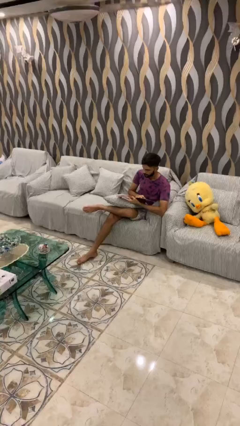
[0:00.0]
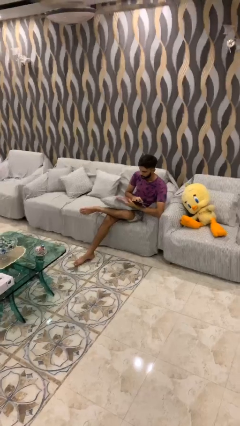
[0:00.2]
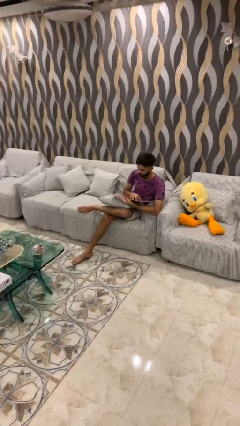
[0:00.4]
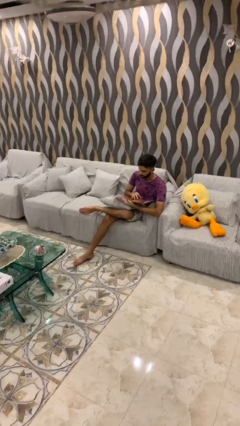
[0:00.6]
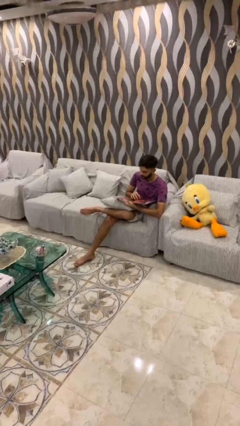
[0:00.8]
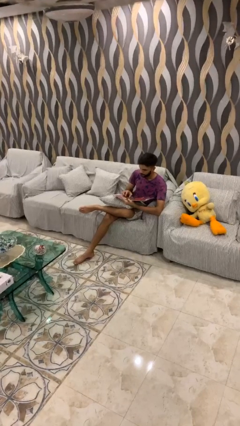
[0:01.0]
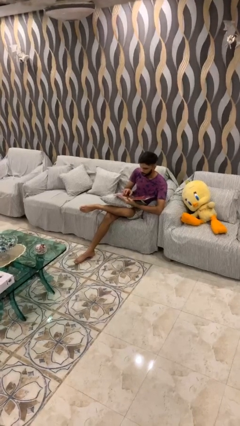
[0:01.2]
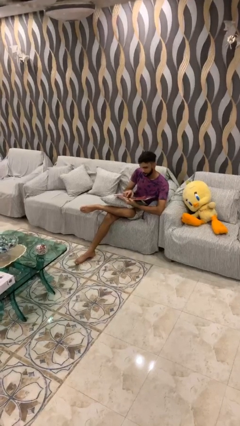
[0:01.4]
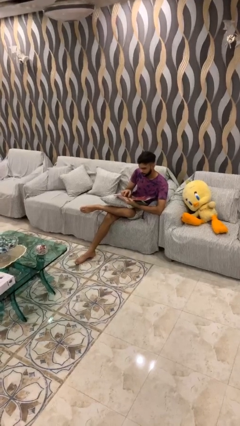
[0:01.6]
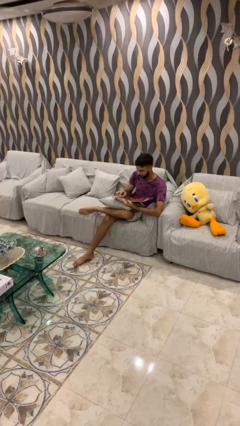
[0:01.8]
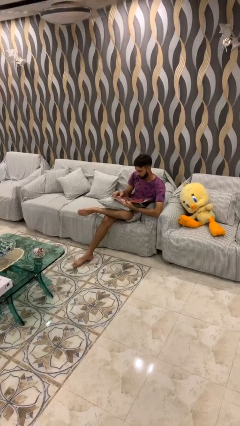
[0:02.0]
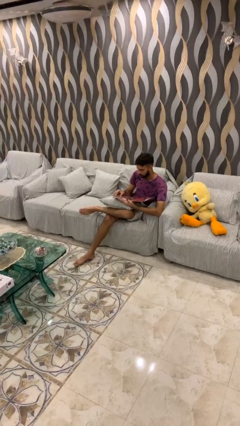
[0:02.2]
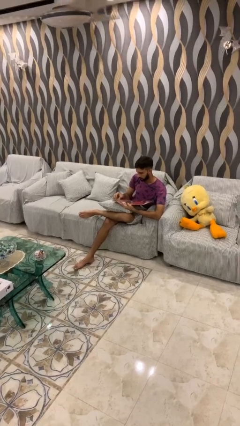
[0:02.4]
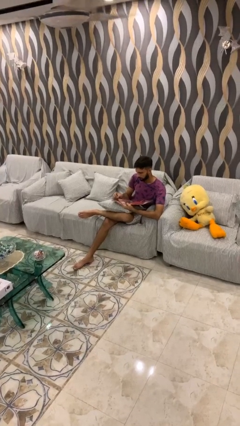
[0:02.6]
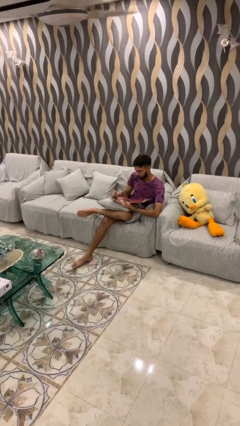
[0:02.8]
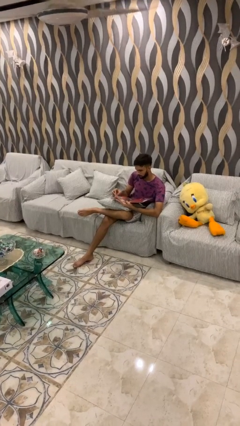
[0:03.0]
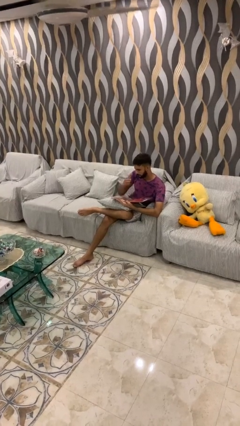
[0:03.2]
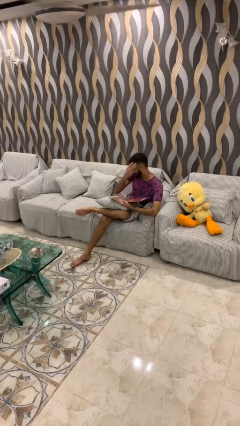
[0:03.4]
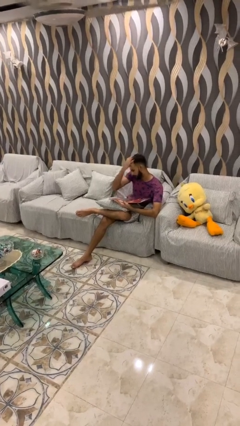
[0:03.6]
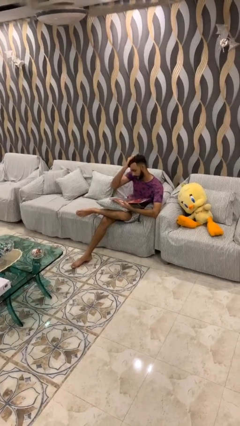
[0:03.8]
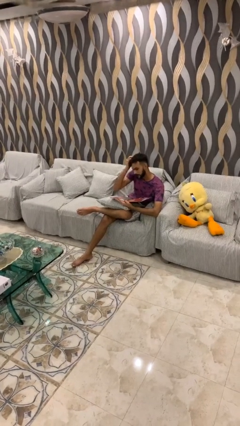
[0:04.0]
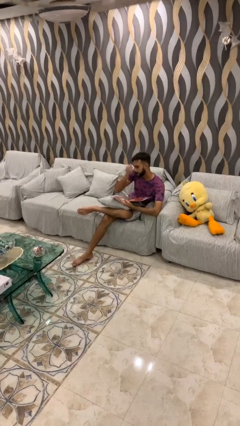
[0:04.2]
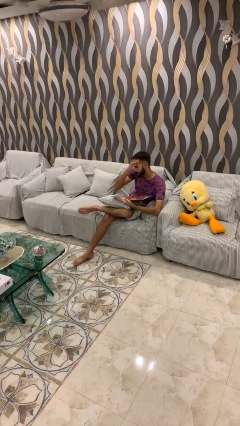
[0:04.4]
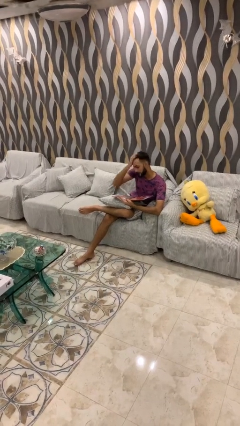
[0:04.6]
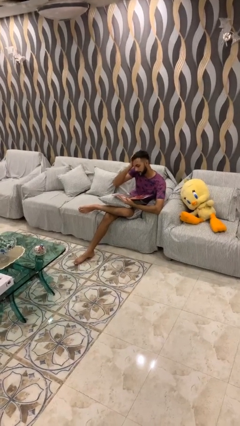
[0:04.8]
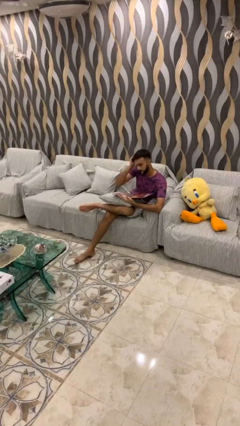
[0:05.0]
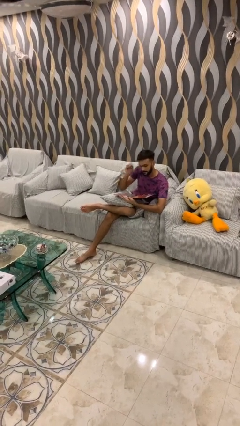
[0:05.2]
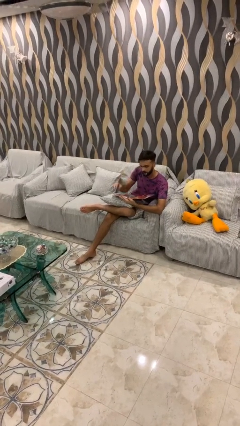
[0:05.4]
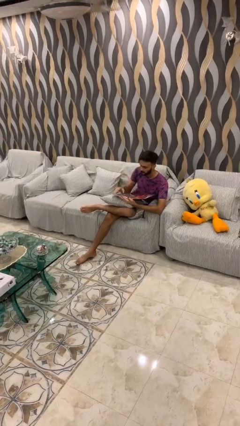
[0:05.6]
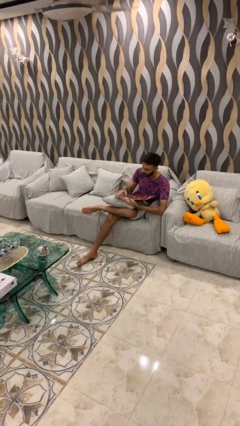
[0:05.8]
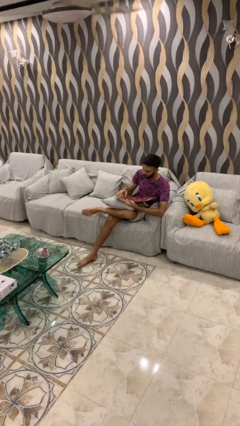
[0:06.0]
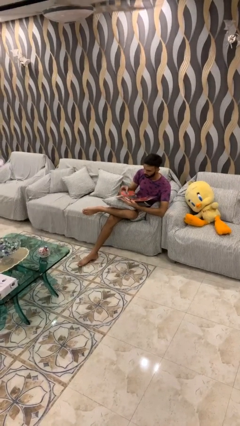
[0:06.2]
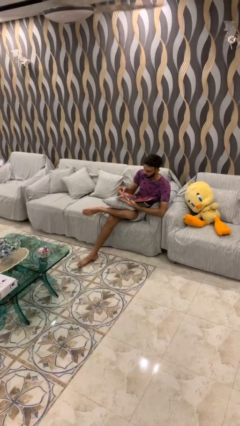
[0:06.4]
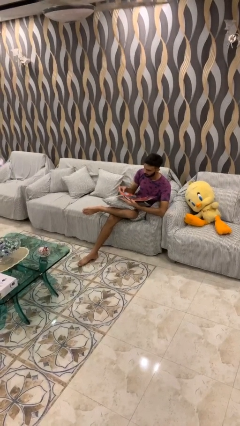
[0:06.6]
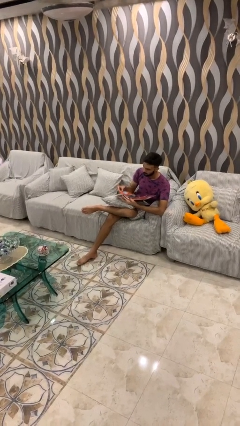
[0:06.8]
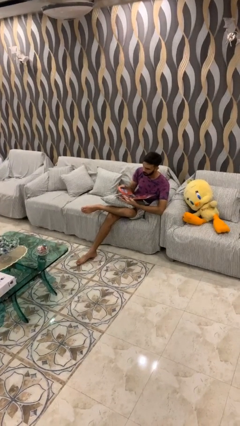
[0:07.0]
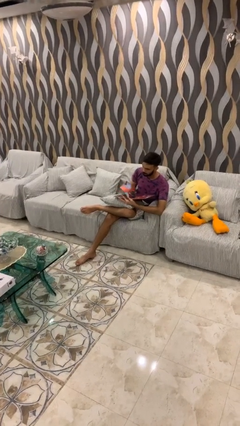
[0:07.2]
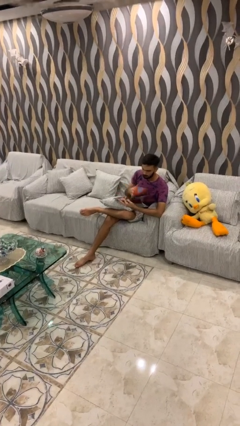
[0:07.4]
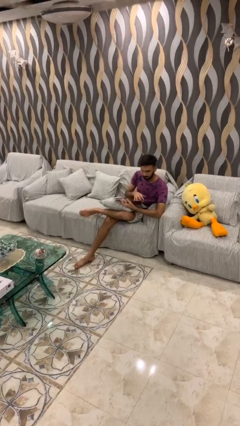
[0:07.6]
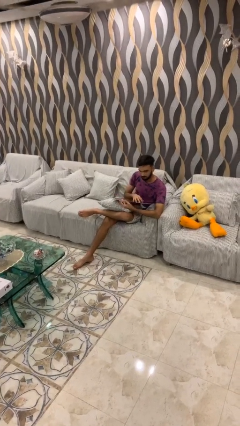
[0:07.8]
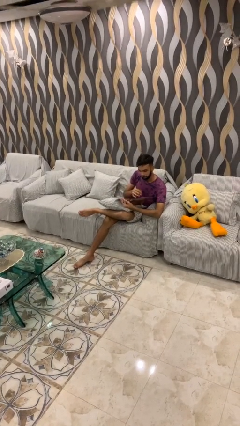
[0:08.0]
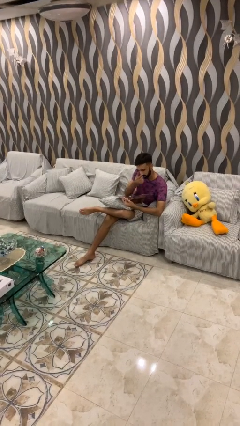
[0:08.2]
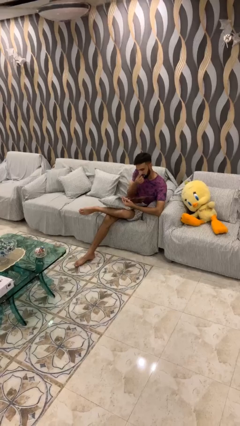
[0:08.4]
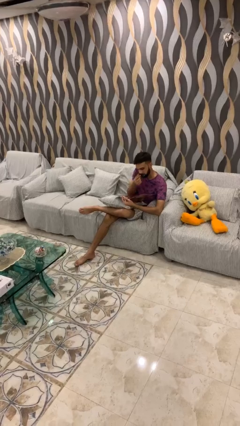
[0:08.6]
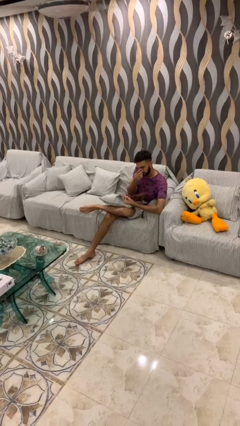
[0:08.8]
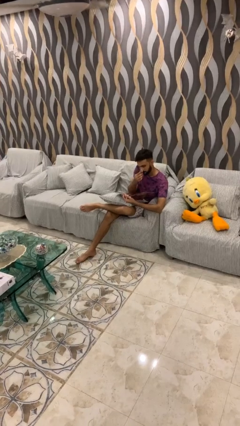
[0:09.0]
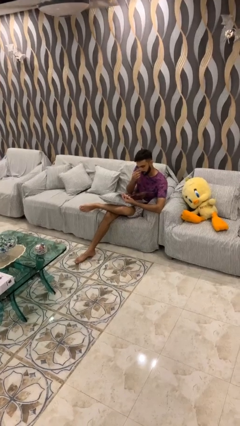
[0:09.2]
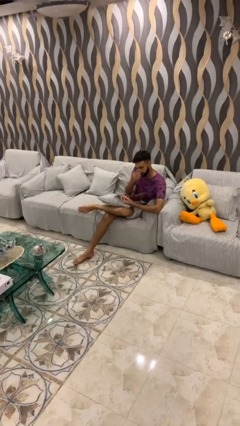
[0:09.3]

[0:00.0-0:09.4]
person reads document

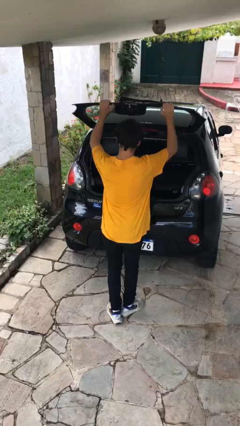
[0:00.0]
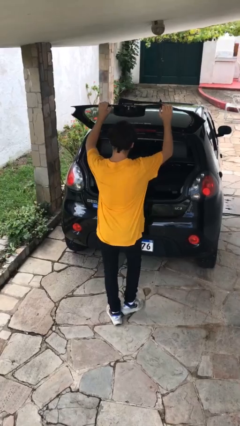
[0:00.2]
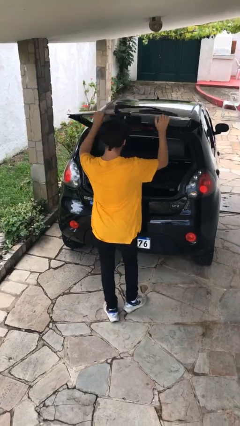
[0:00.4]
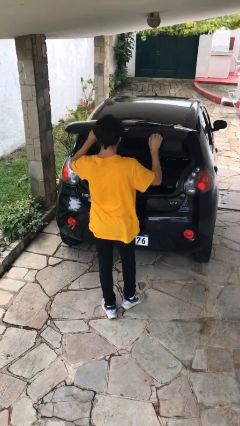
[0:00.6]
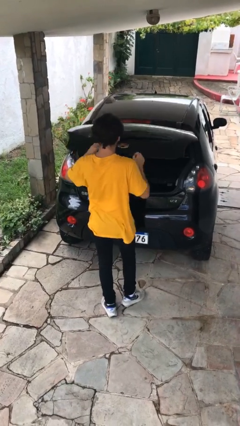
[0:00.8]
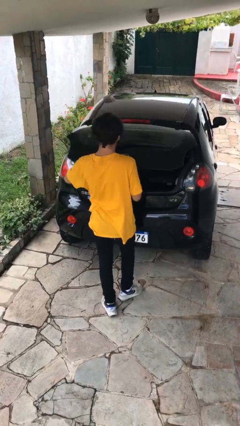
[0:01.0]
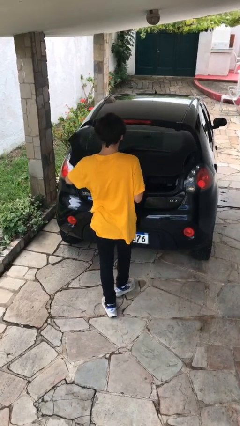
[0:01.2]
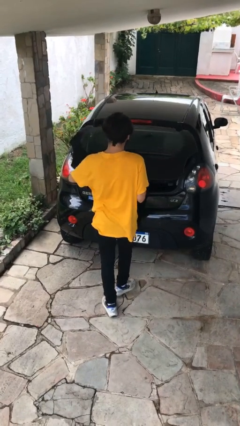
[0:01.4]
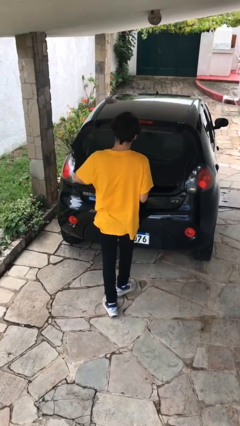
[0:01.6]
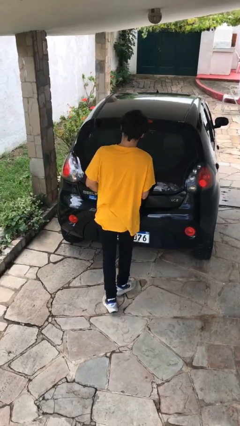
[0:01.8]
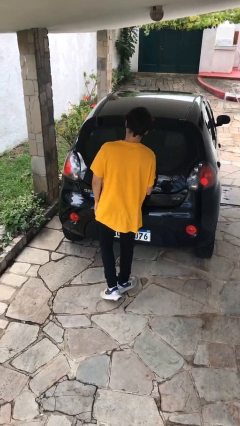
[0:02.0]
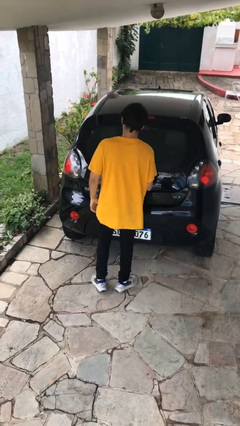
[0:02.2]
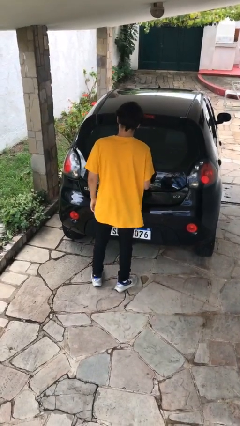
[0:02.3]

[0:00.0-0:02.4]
person closes car trunk

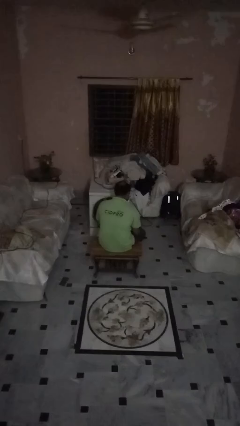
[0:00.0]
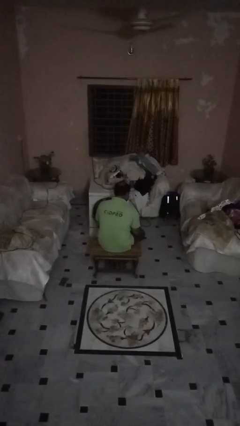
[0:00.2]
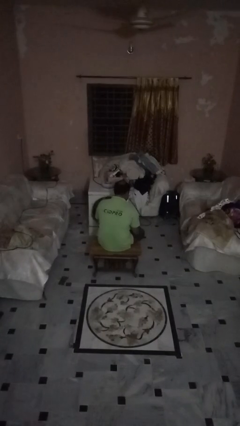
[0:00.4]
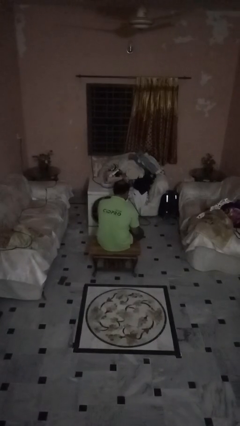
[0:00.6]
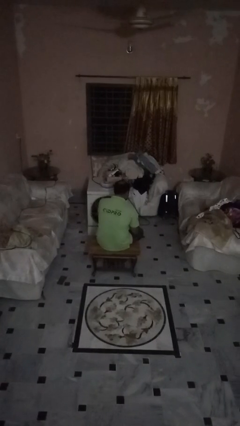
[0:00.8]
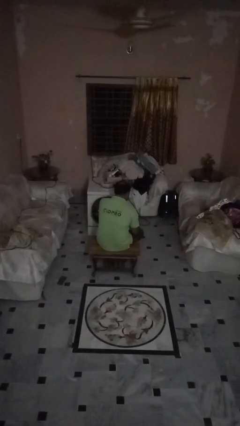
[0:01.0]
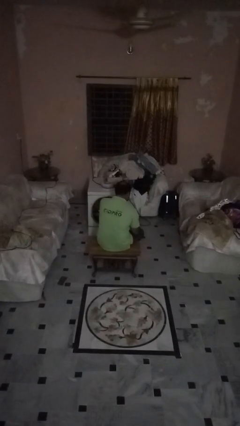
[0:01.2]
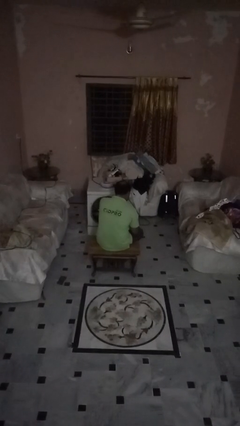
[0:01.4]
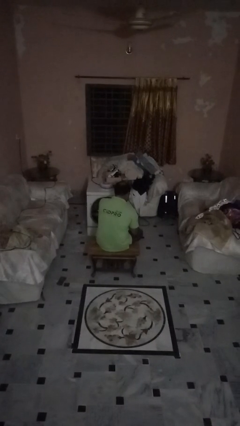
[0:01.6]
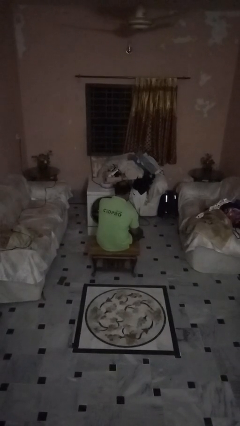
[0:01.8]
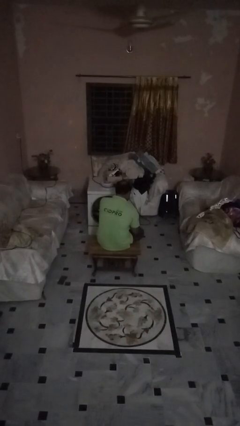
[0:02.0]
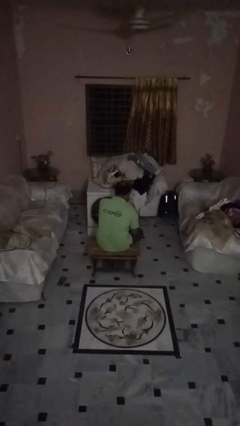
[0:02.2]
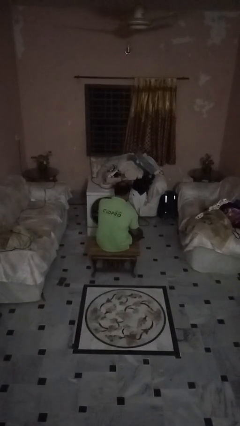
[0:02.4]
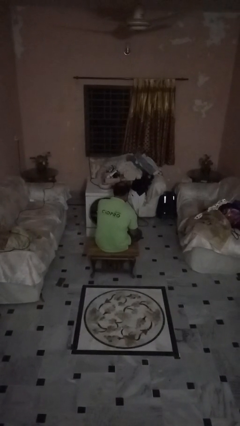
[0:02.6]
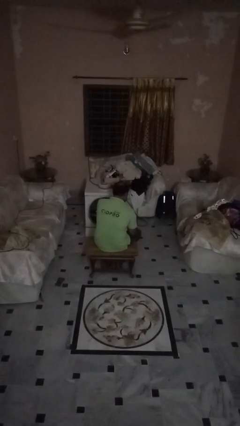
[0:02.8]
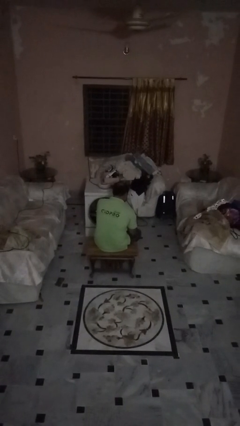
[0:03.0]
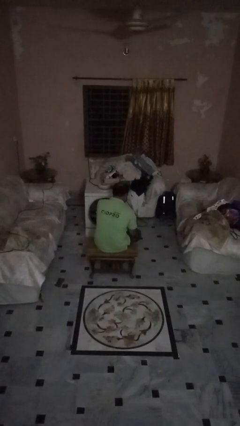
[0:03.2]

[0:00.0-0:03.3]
person opens beverage can

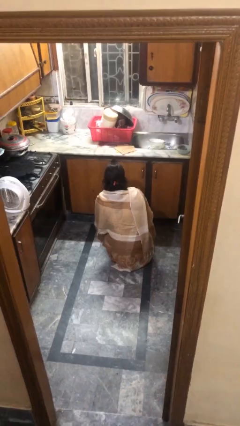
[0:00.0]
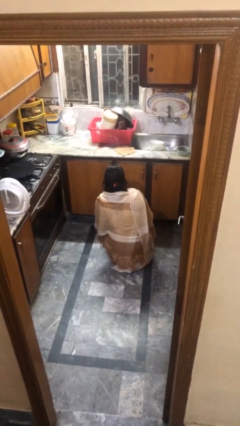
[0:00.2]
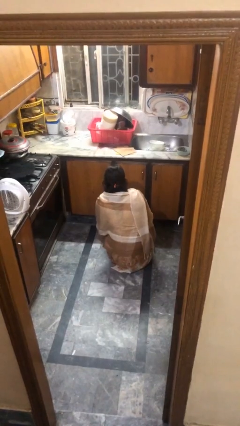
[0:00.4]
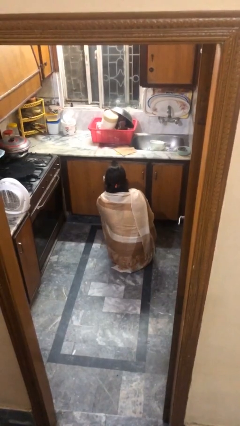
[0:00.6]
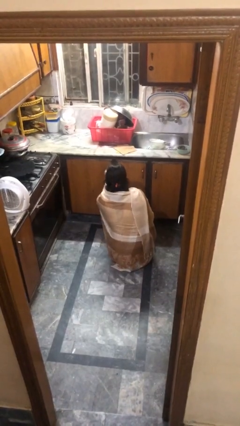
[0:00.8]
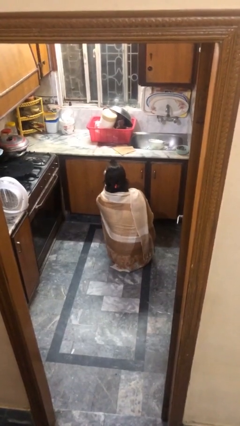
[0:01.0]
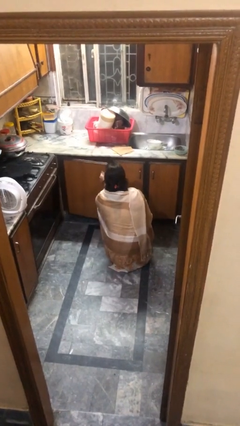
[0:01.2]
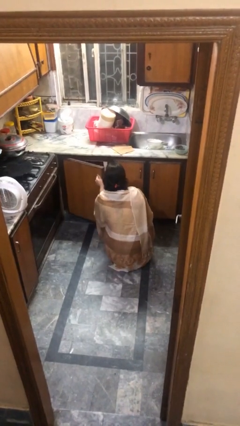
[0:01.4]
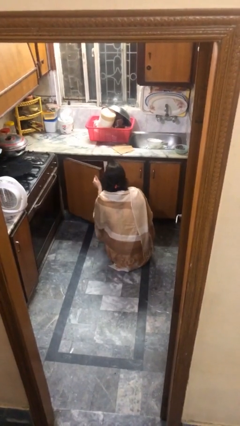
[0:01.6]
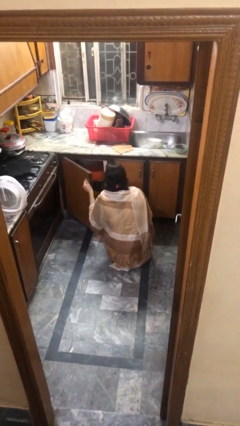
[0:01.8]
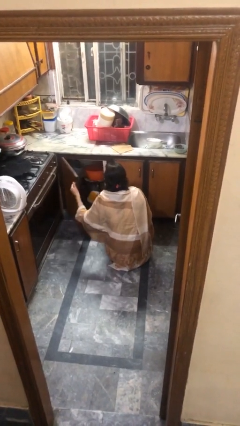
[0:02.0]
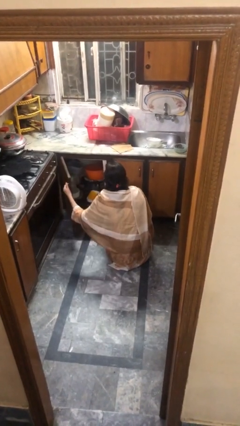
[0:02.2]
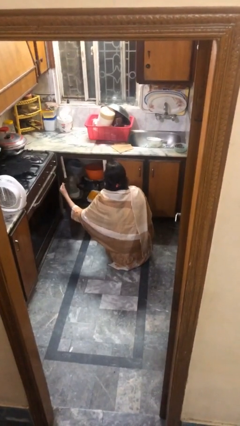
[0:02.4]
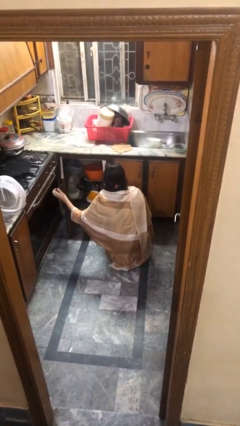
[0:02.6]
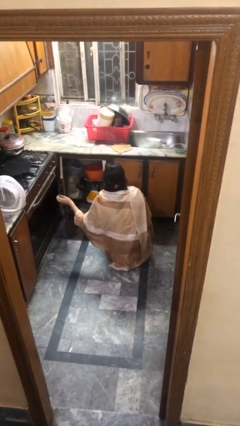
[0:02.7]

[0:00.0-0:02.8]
person opens kitchen drawer

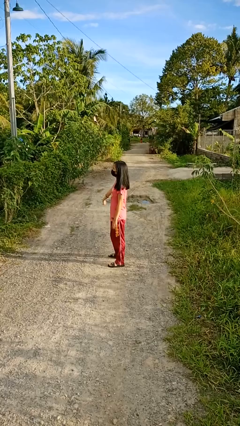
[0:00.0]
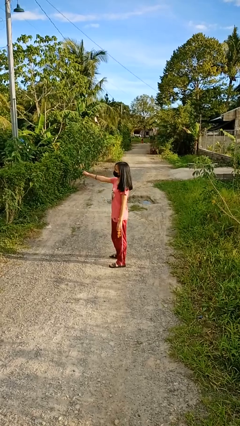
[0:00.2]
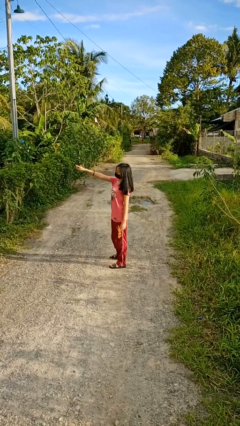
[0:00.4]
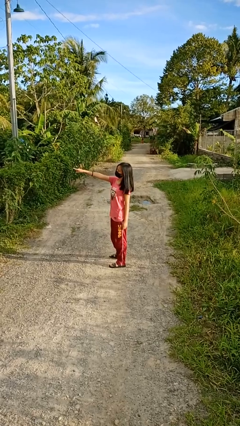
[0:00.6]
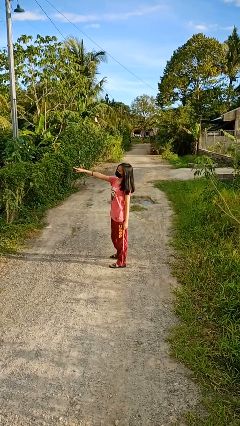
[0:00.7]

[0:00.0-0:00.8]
person points at person
